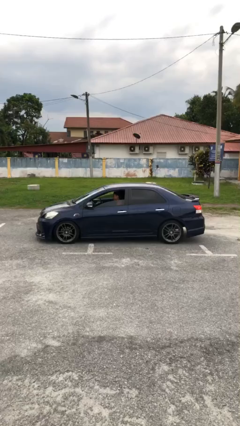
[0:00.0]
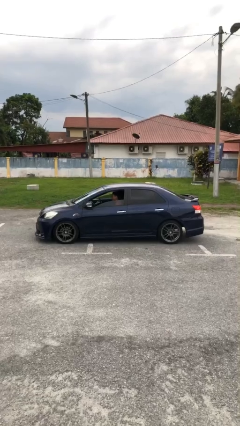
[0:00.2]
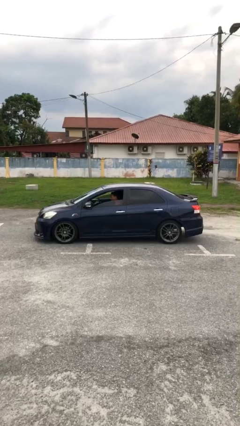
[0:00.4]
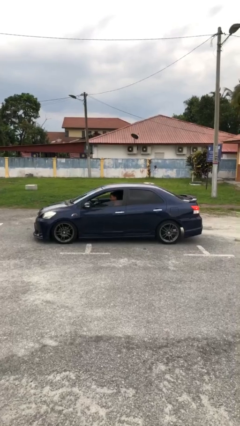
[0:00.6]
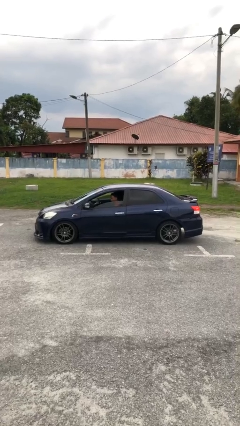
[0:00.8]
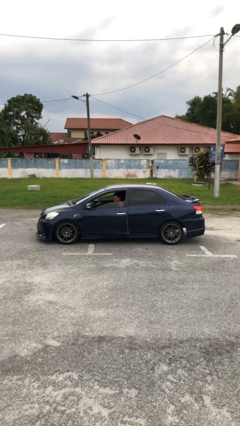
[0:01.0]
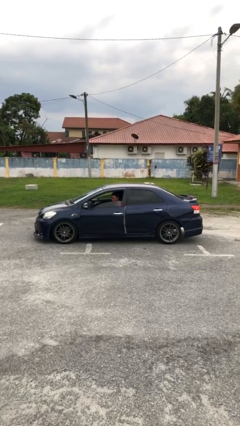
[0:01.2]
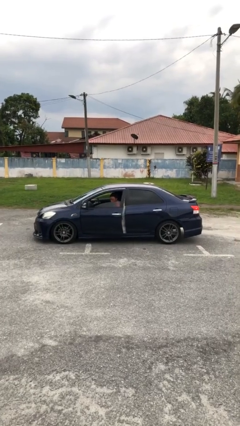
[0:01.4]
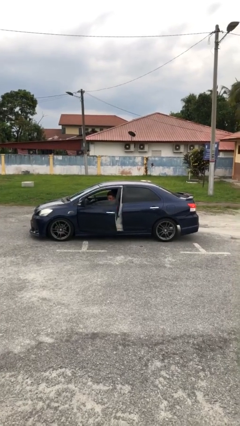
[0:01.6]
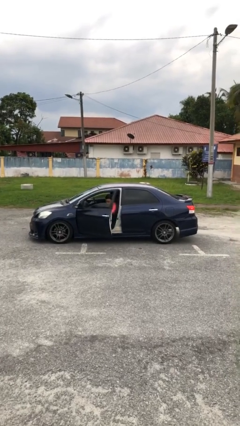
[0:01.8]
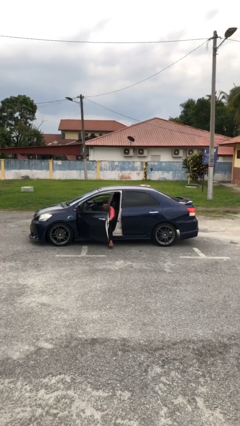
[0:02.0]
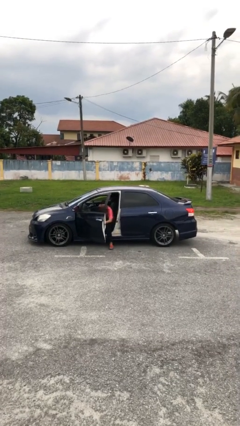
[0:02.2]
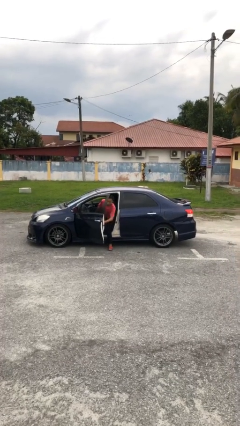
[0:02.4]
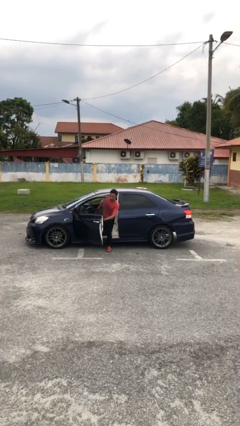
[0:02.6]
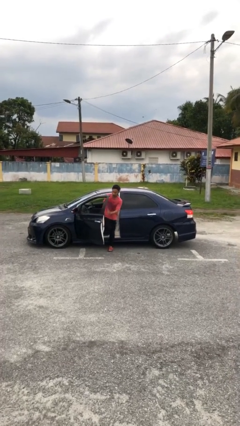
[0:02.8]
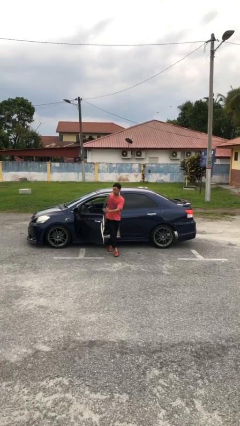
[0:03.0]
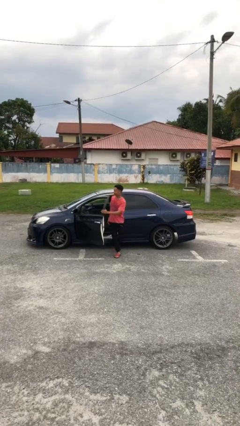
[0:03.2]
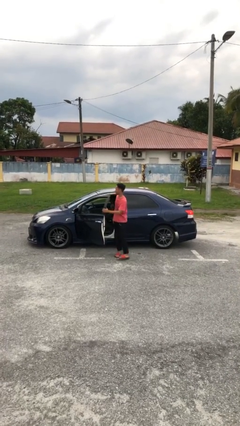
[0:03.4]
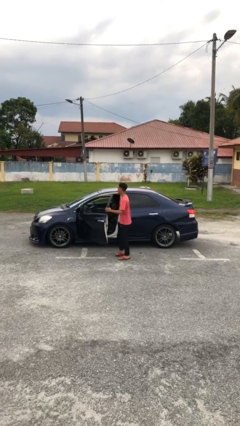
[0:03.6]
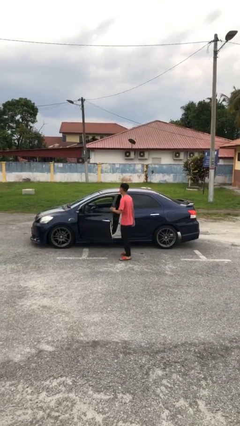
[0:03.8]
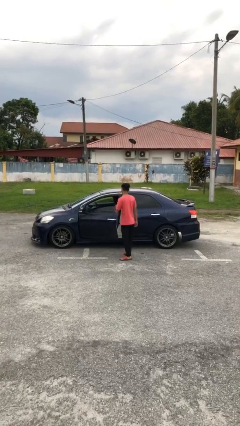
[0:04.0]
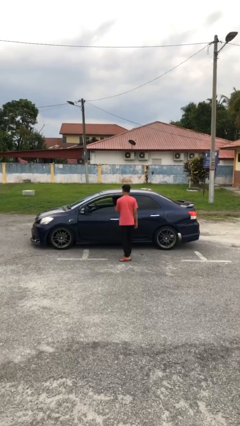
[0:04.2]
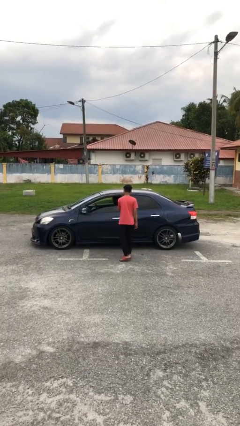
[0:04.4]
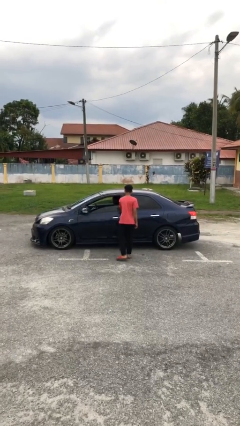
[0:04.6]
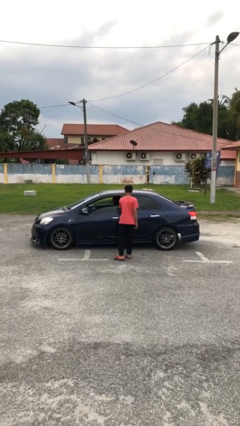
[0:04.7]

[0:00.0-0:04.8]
car drops off person

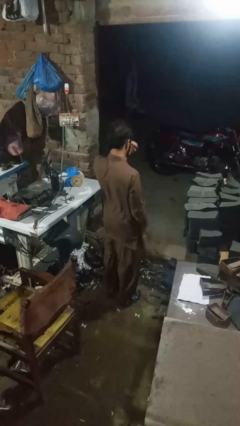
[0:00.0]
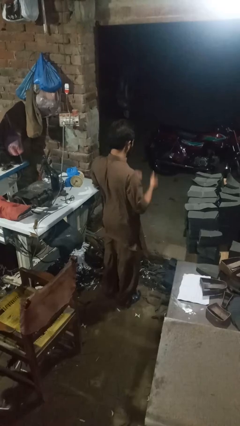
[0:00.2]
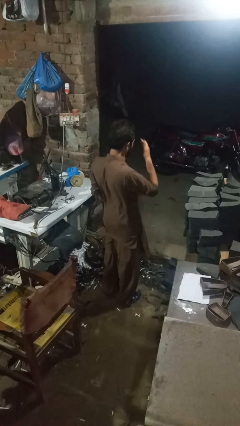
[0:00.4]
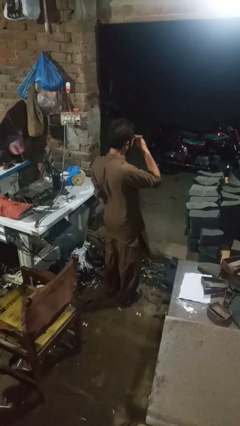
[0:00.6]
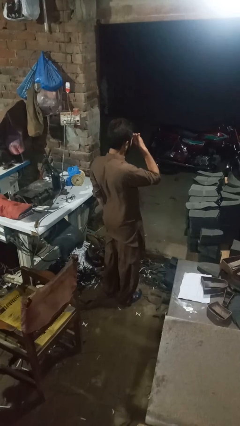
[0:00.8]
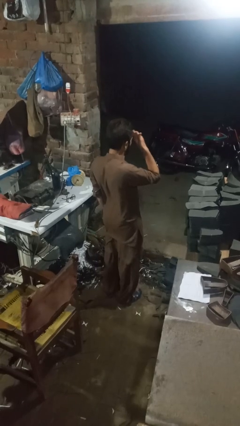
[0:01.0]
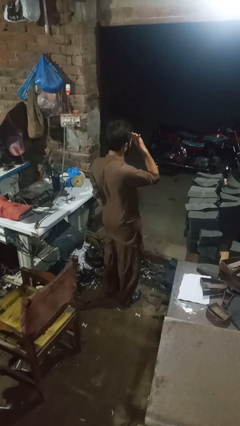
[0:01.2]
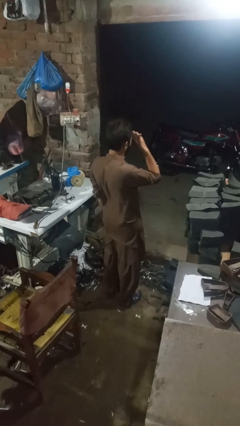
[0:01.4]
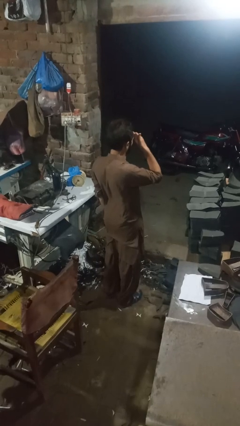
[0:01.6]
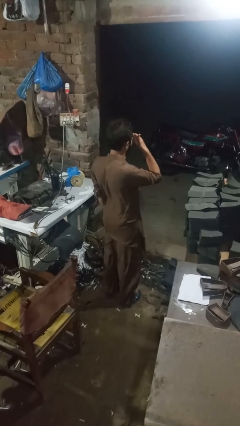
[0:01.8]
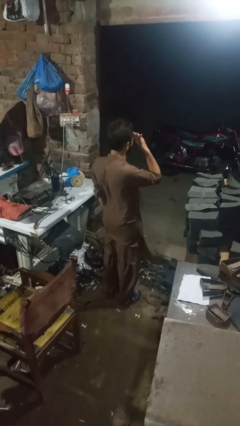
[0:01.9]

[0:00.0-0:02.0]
person rubs eyes

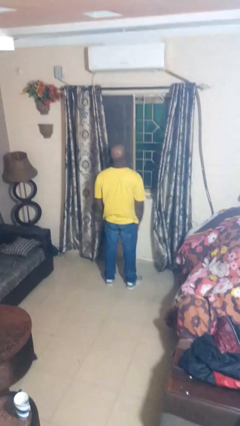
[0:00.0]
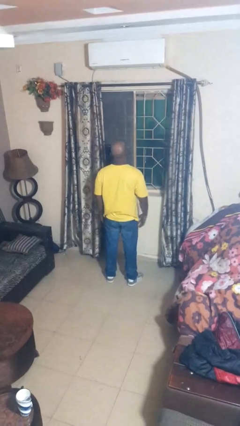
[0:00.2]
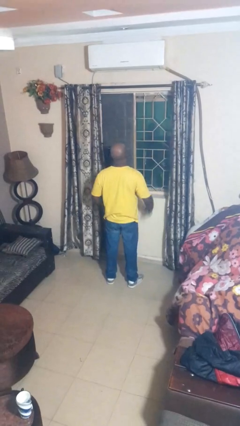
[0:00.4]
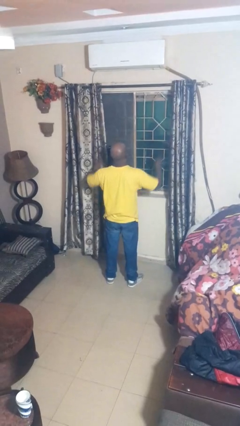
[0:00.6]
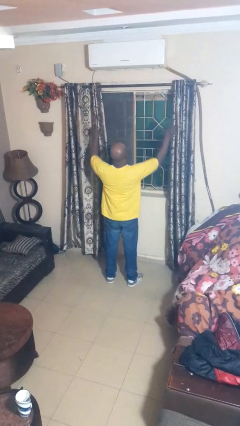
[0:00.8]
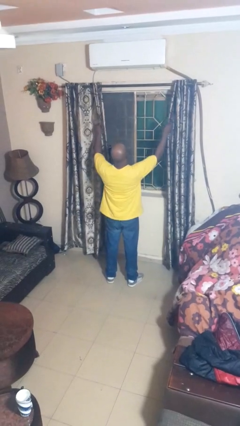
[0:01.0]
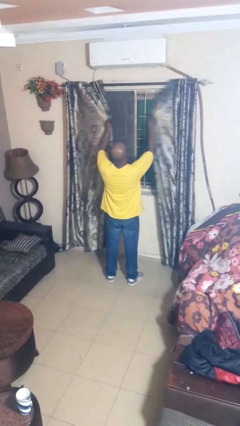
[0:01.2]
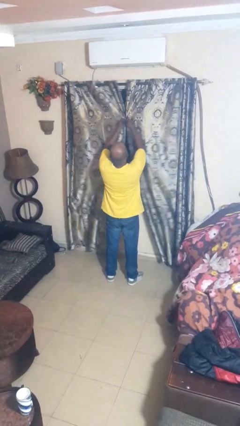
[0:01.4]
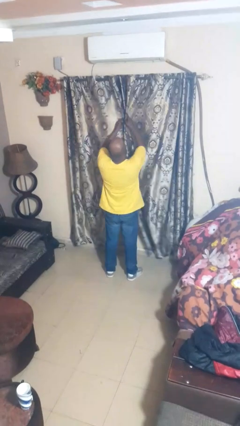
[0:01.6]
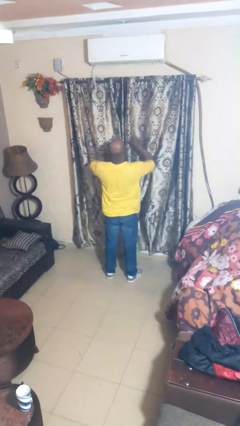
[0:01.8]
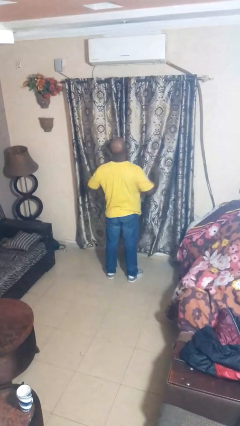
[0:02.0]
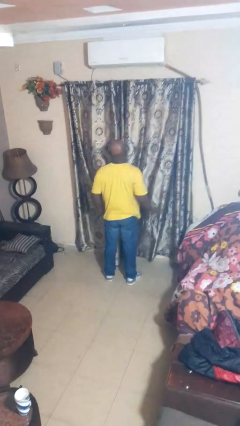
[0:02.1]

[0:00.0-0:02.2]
person closes curtains

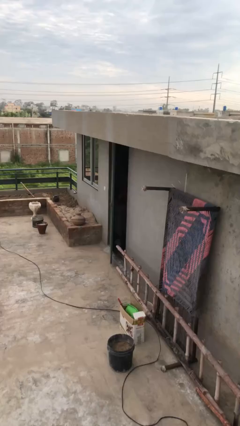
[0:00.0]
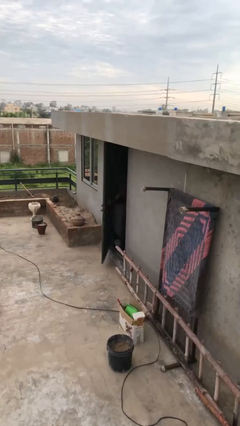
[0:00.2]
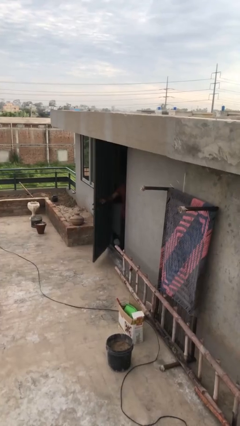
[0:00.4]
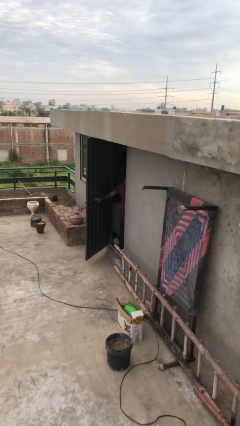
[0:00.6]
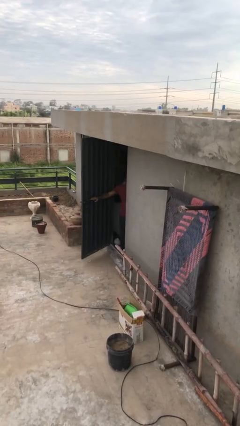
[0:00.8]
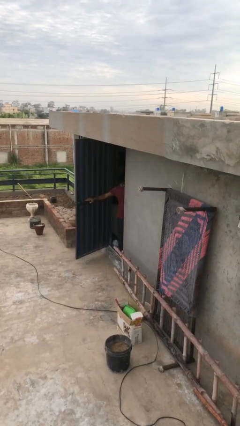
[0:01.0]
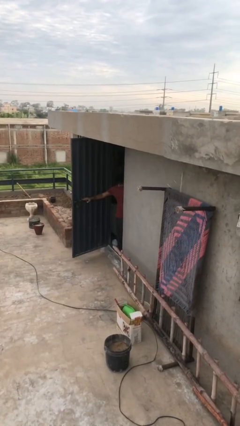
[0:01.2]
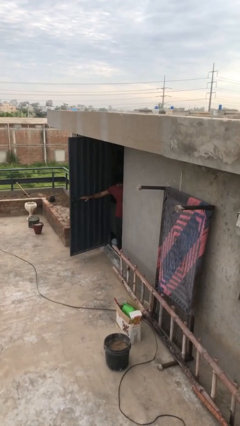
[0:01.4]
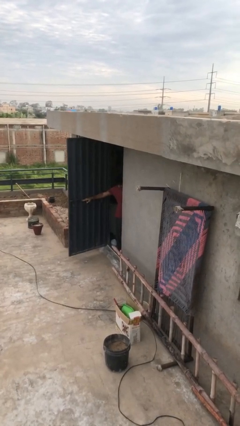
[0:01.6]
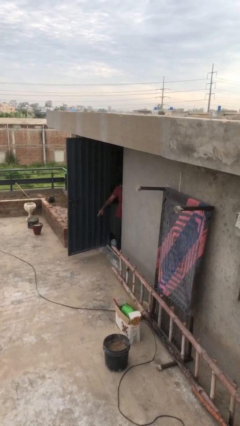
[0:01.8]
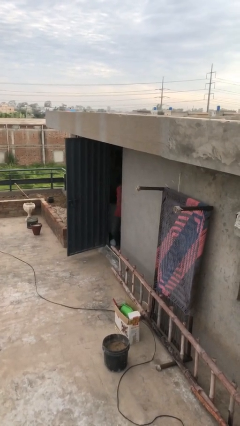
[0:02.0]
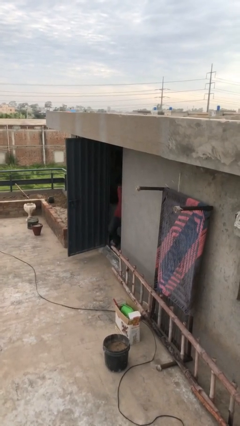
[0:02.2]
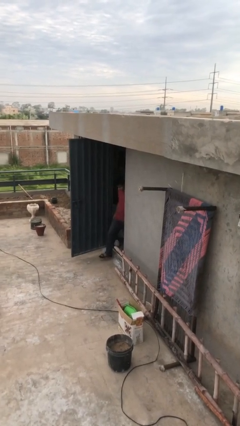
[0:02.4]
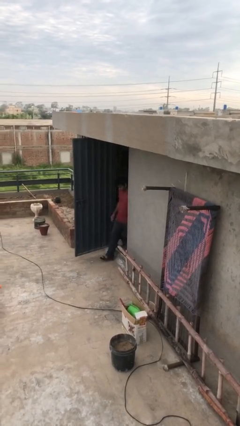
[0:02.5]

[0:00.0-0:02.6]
person opens facility door

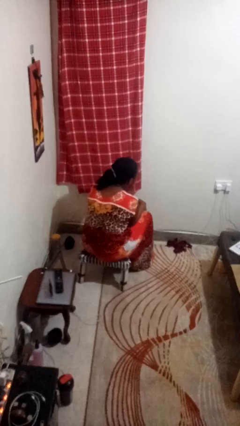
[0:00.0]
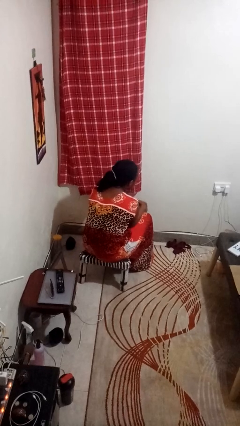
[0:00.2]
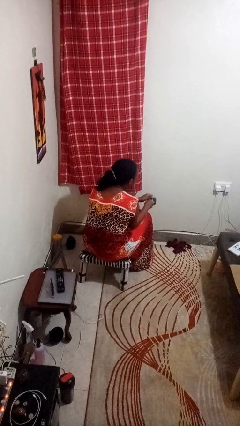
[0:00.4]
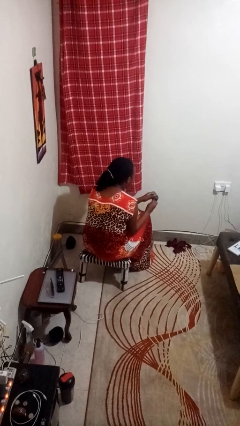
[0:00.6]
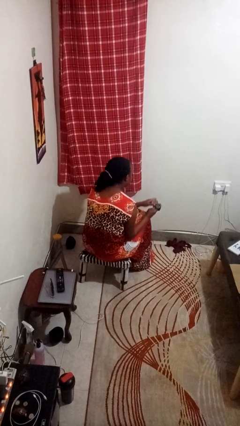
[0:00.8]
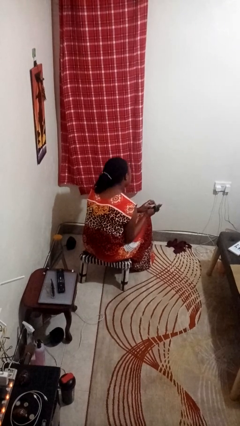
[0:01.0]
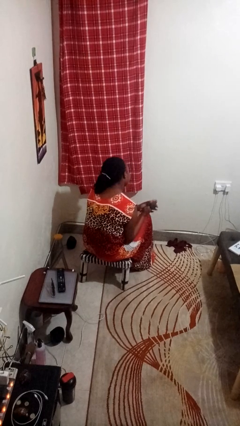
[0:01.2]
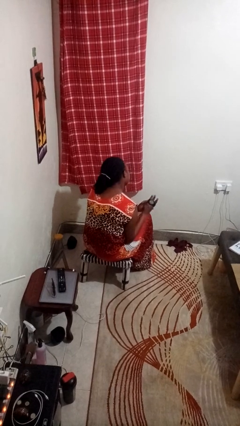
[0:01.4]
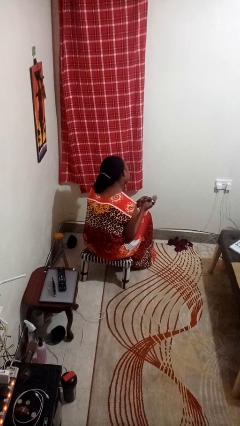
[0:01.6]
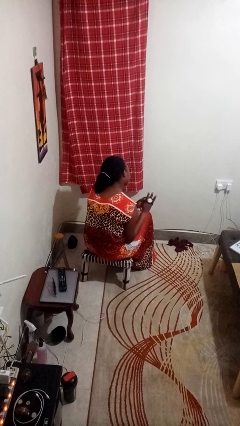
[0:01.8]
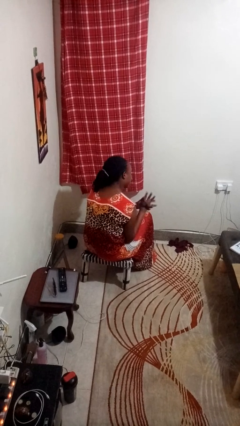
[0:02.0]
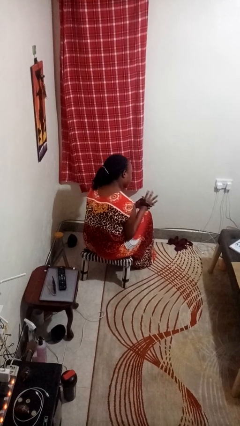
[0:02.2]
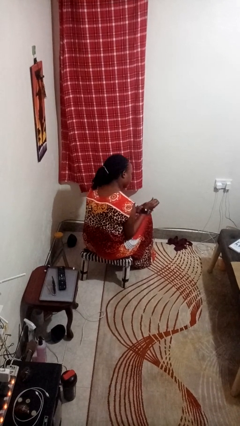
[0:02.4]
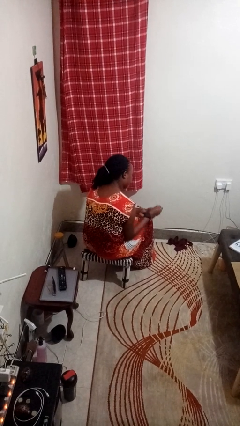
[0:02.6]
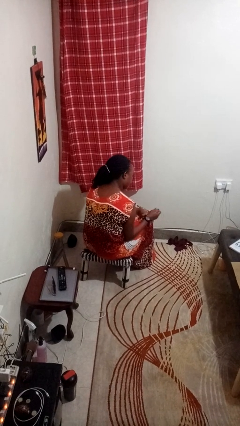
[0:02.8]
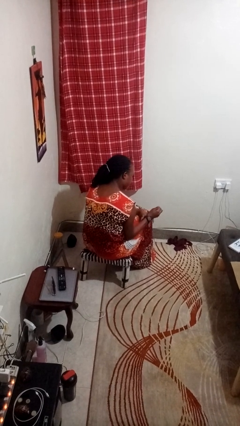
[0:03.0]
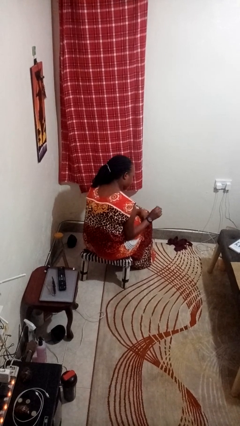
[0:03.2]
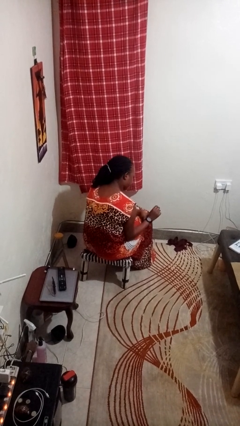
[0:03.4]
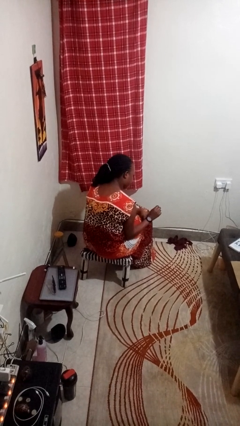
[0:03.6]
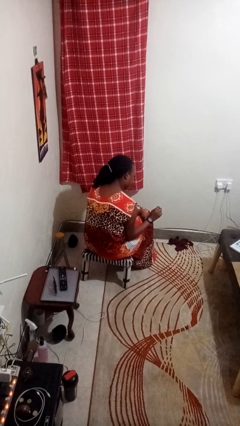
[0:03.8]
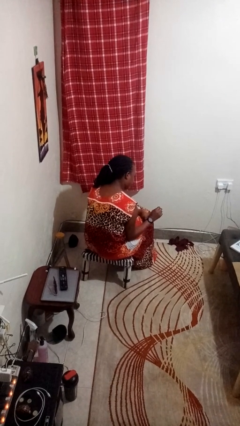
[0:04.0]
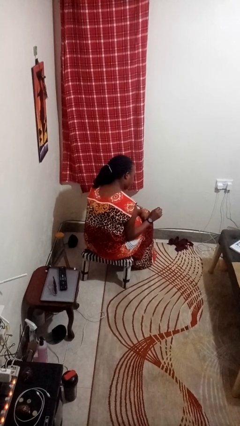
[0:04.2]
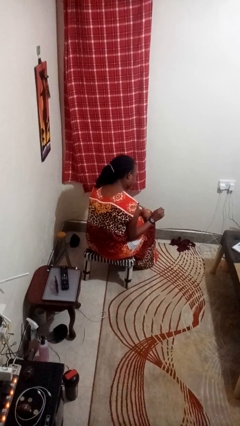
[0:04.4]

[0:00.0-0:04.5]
person puts on wristwatch

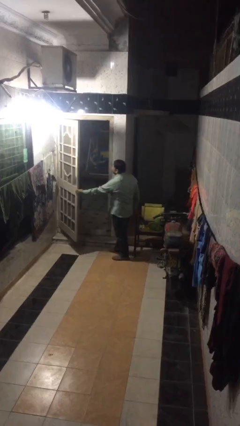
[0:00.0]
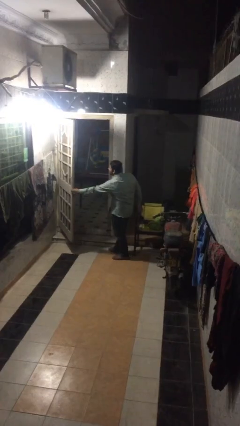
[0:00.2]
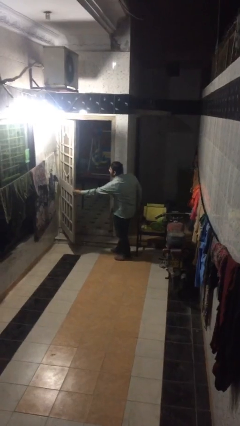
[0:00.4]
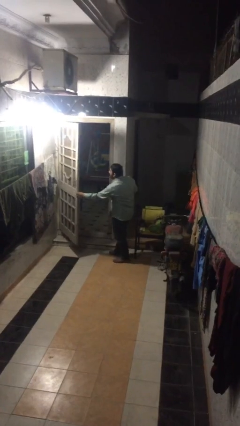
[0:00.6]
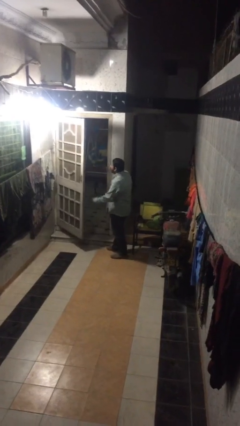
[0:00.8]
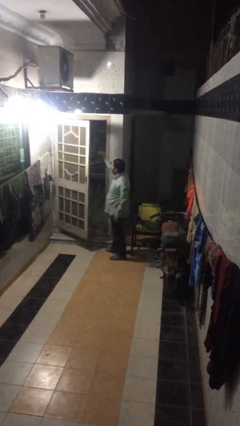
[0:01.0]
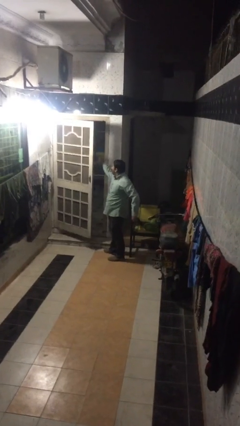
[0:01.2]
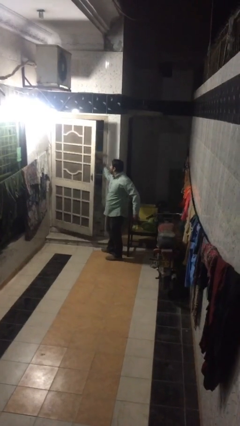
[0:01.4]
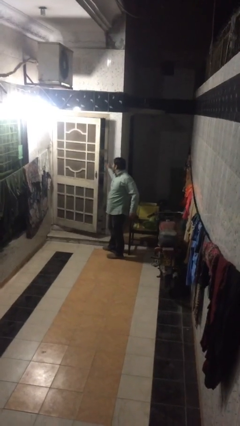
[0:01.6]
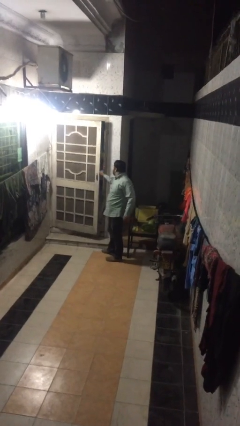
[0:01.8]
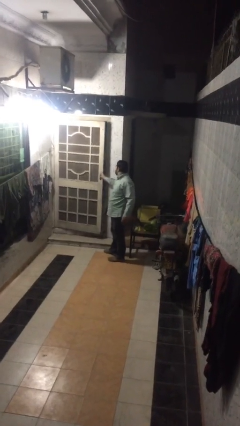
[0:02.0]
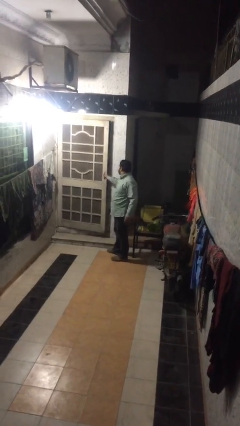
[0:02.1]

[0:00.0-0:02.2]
person closes facility door
